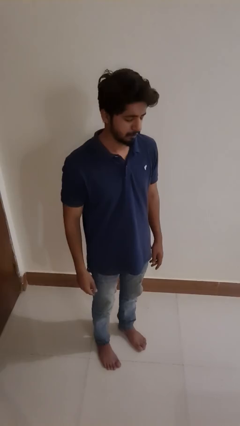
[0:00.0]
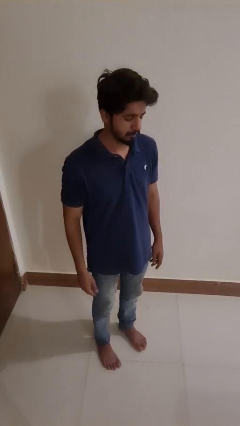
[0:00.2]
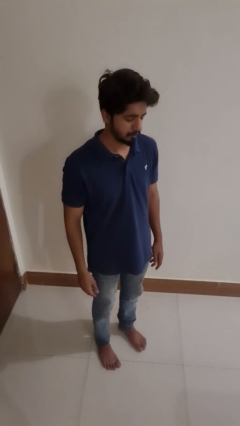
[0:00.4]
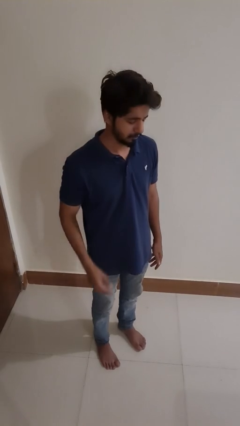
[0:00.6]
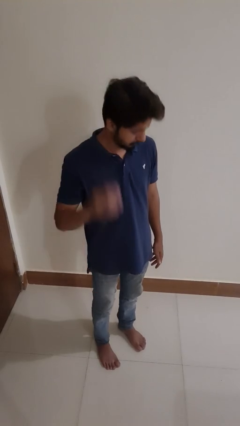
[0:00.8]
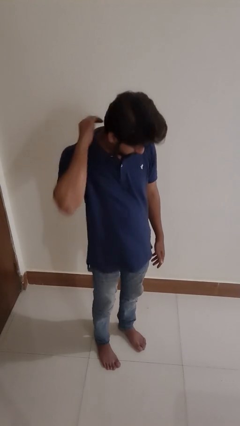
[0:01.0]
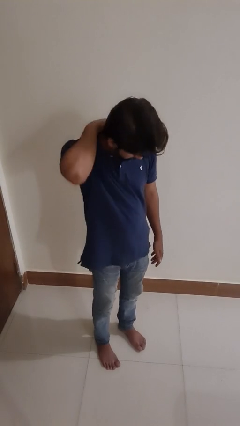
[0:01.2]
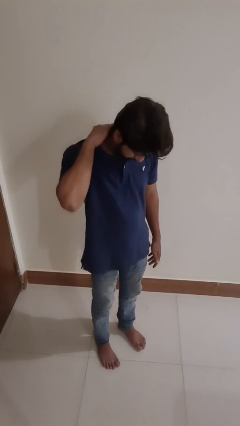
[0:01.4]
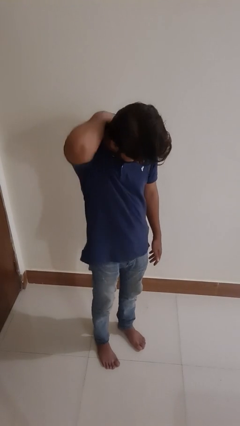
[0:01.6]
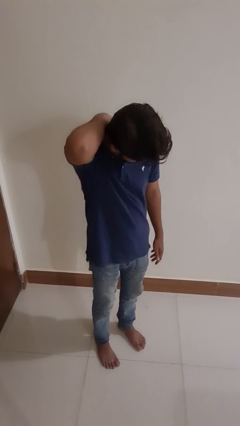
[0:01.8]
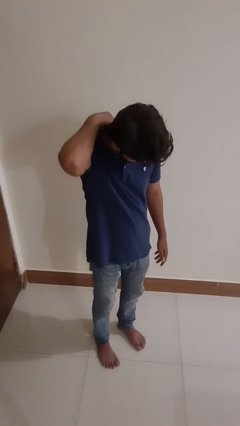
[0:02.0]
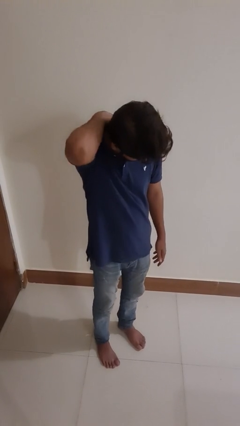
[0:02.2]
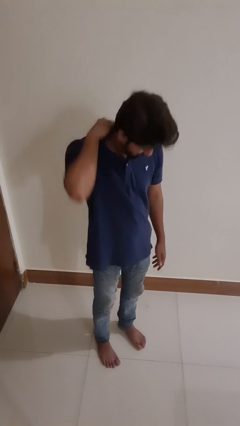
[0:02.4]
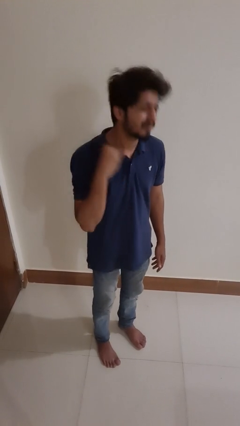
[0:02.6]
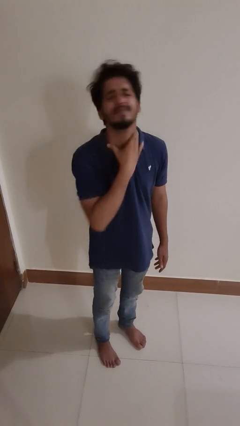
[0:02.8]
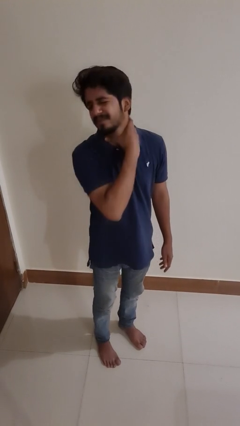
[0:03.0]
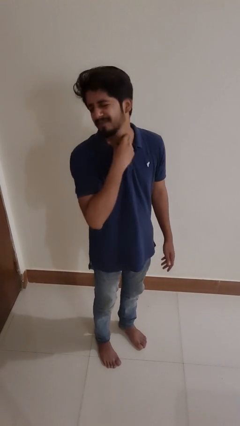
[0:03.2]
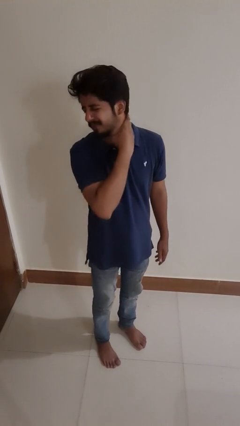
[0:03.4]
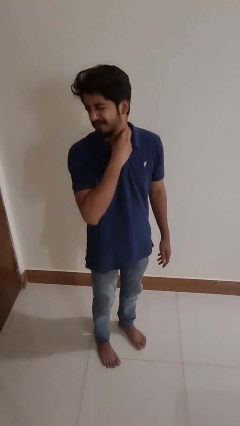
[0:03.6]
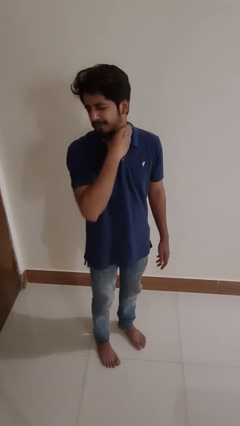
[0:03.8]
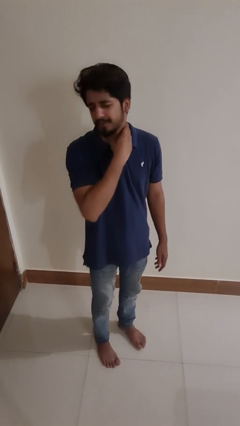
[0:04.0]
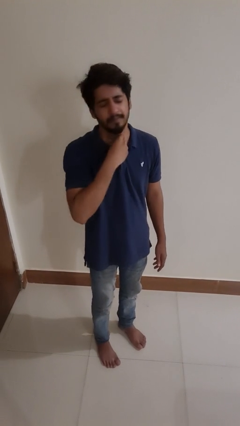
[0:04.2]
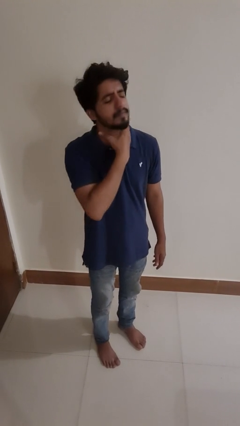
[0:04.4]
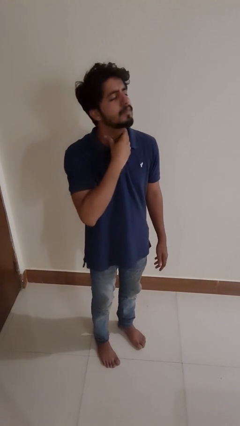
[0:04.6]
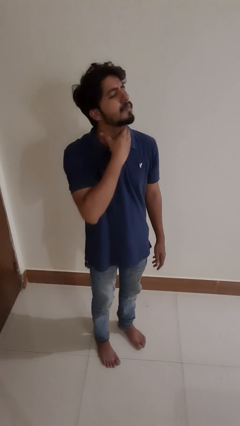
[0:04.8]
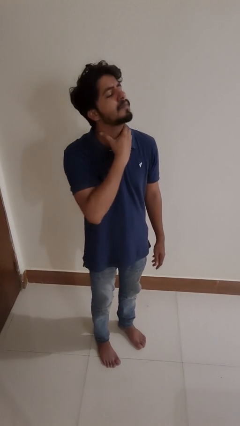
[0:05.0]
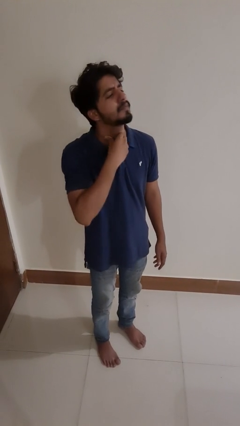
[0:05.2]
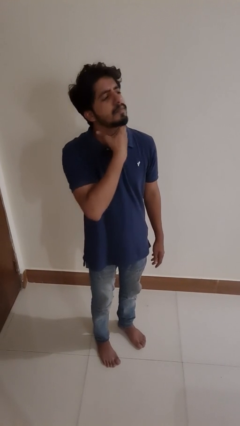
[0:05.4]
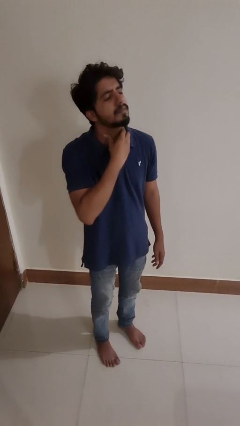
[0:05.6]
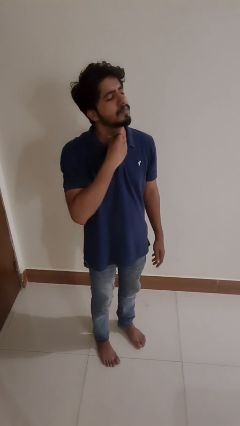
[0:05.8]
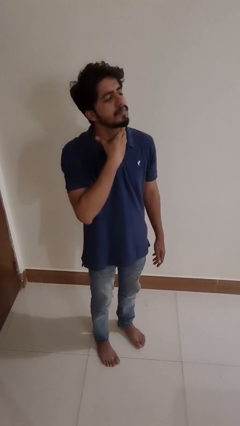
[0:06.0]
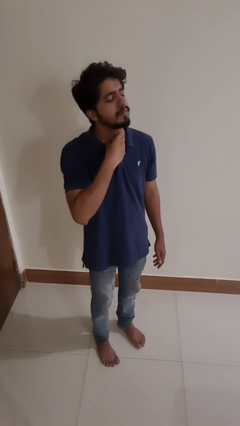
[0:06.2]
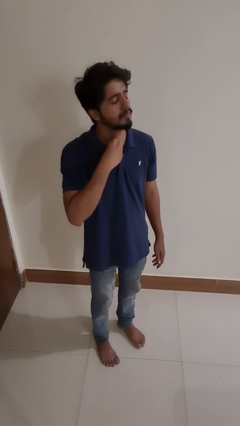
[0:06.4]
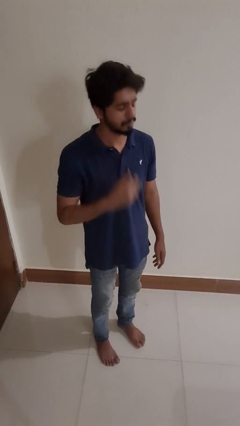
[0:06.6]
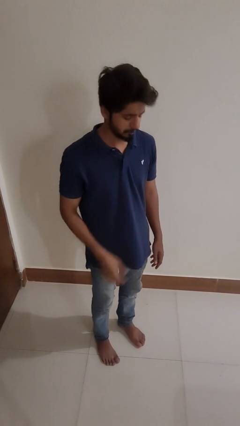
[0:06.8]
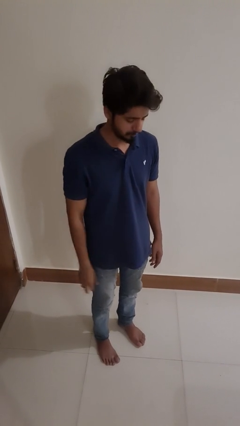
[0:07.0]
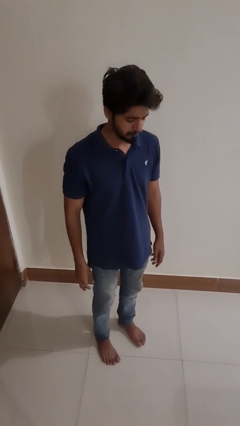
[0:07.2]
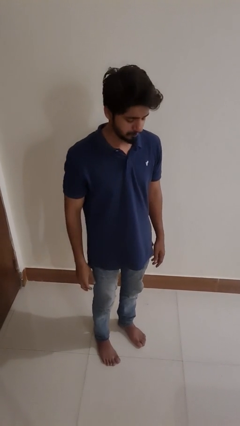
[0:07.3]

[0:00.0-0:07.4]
person rubs neck

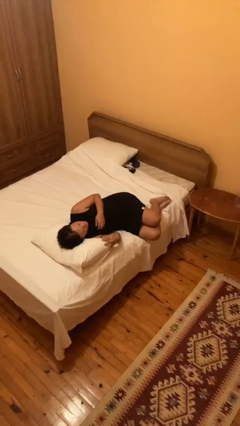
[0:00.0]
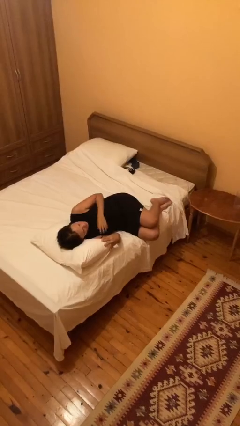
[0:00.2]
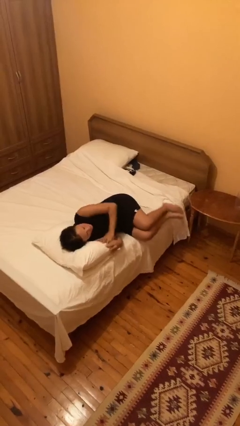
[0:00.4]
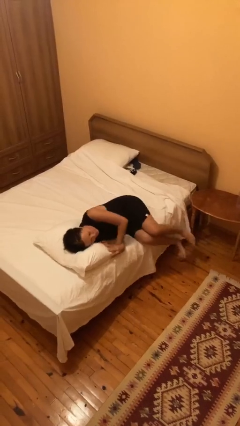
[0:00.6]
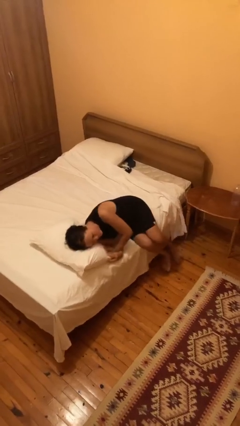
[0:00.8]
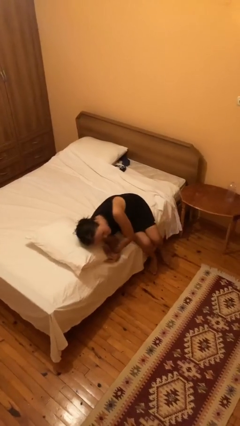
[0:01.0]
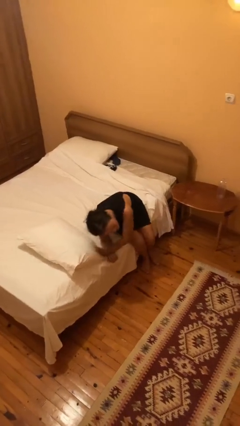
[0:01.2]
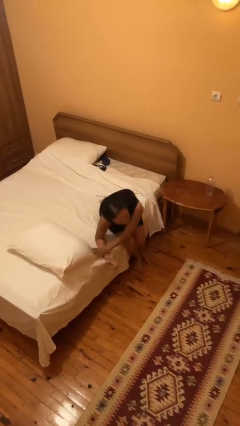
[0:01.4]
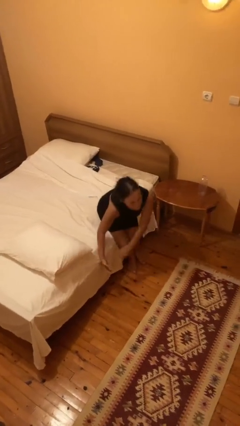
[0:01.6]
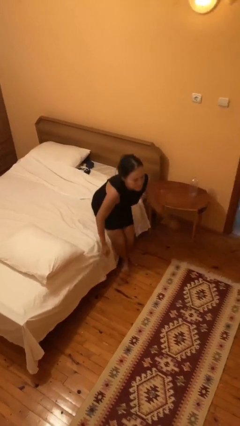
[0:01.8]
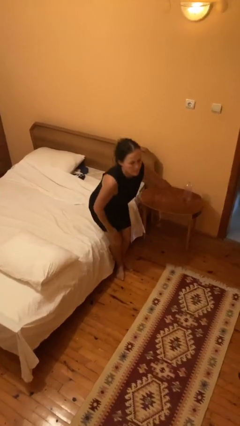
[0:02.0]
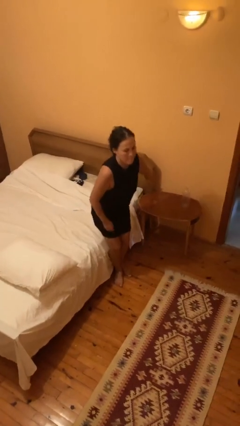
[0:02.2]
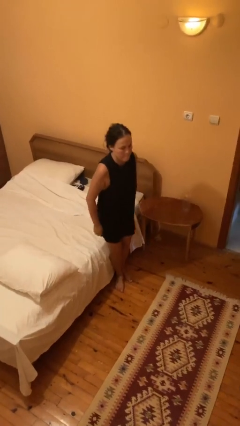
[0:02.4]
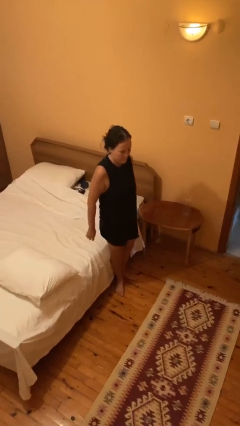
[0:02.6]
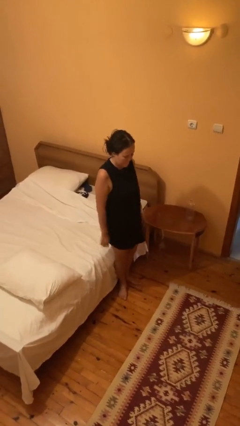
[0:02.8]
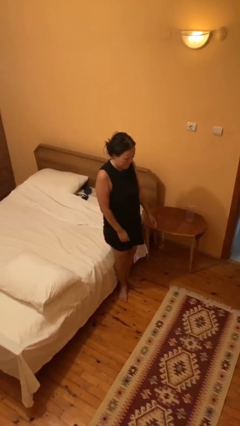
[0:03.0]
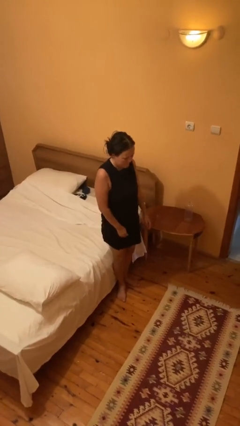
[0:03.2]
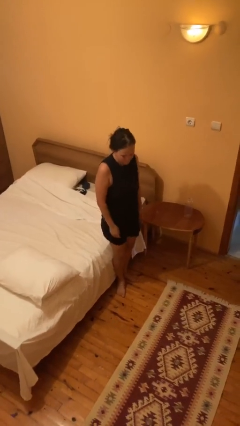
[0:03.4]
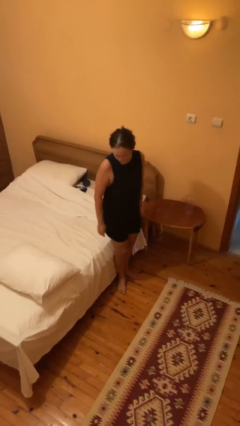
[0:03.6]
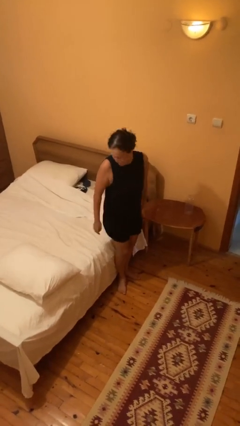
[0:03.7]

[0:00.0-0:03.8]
person stands up

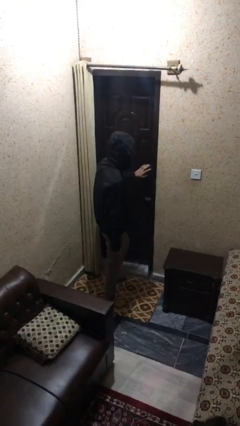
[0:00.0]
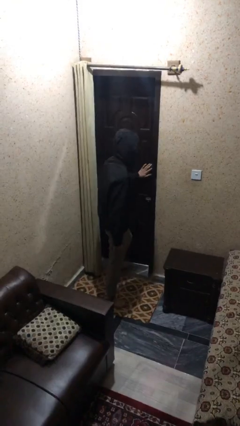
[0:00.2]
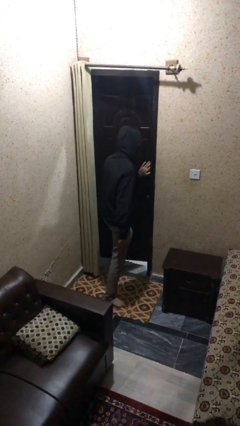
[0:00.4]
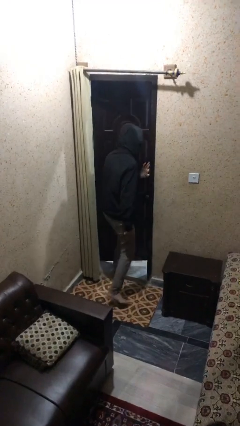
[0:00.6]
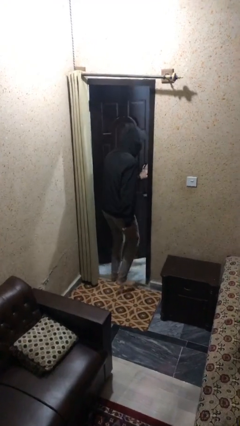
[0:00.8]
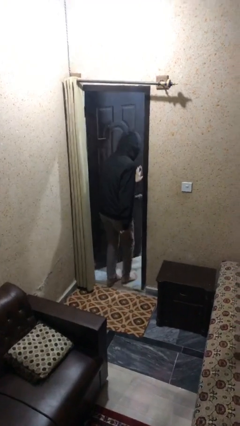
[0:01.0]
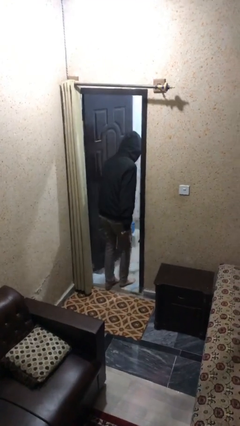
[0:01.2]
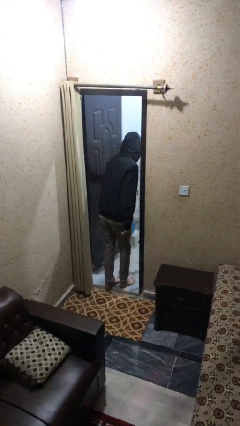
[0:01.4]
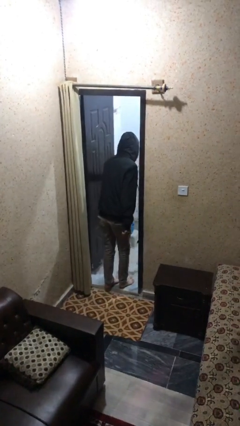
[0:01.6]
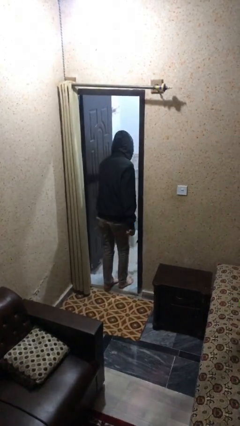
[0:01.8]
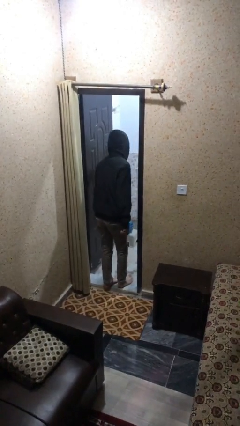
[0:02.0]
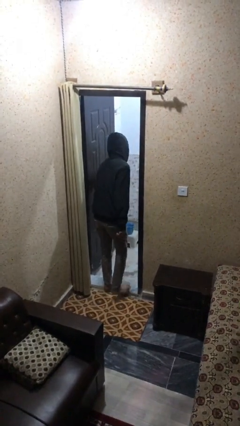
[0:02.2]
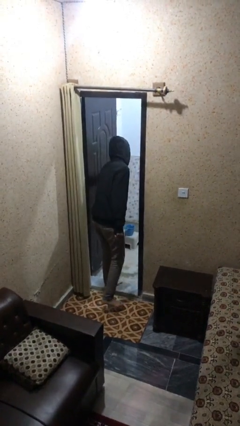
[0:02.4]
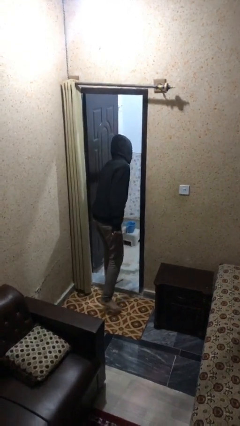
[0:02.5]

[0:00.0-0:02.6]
person opens facility door

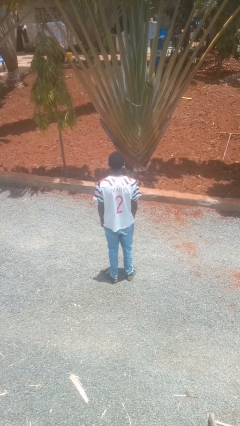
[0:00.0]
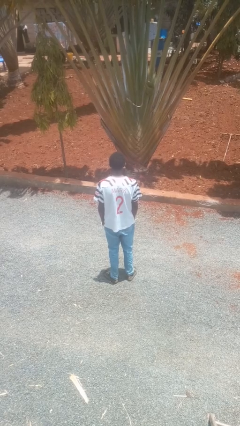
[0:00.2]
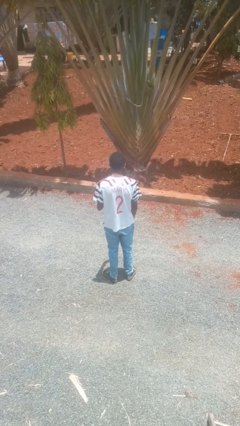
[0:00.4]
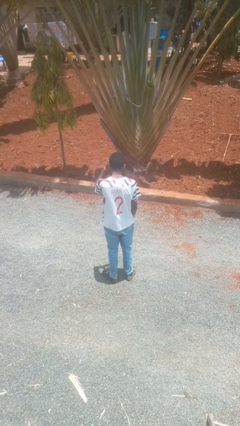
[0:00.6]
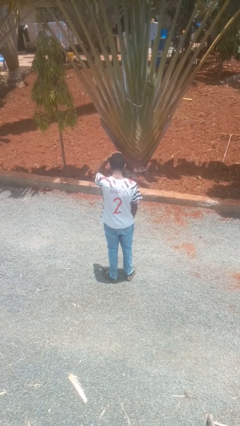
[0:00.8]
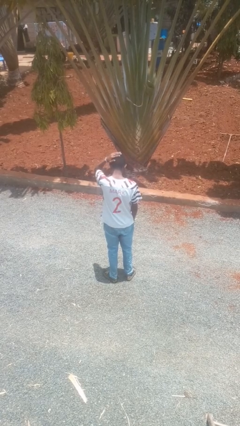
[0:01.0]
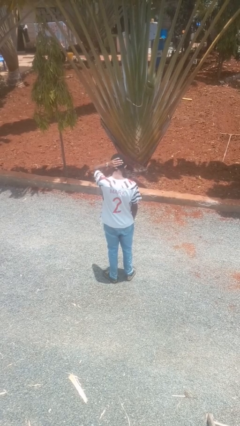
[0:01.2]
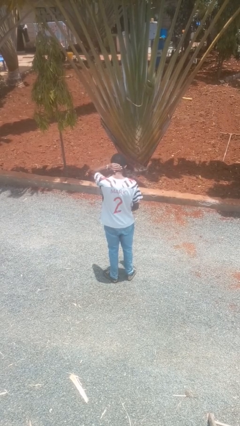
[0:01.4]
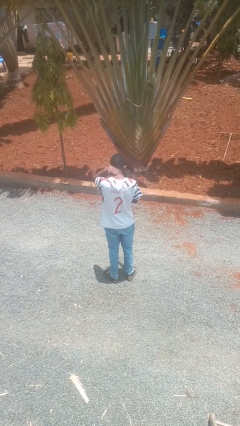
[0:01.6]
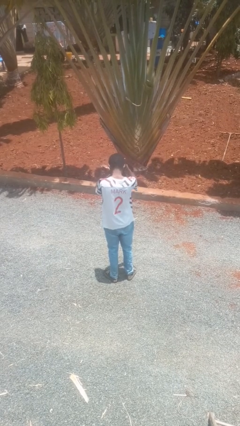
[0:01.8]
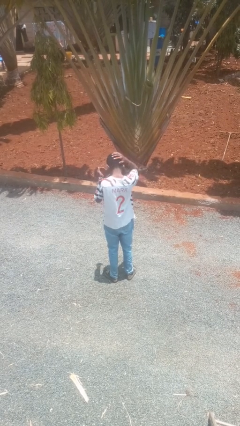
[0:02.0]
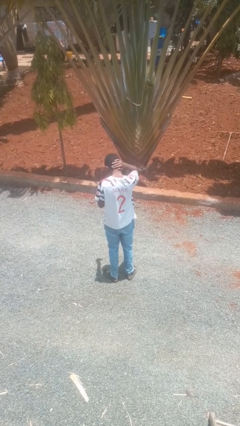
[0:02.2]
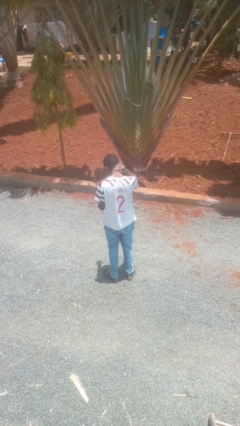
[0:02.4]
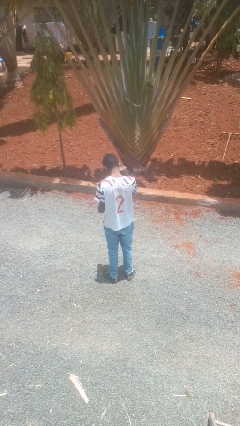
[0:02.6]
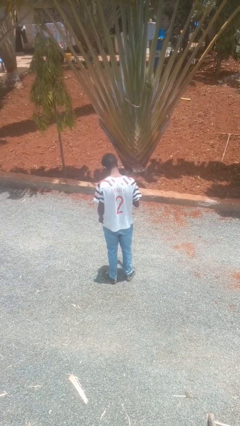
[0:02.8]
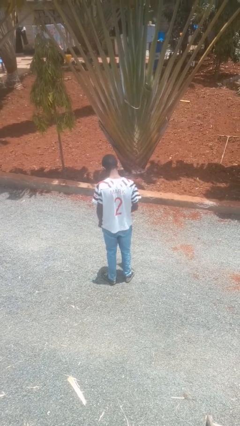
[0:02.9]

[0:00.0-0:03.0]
person strokes hair

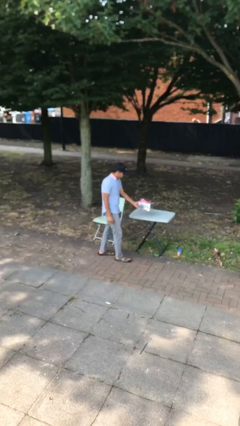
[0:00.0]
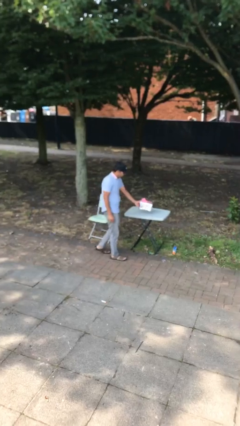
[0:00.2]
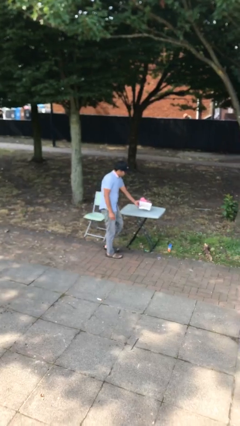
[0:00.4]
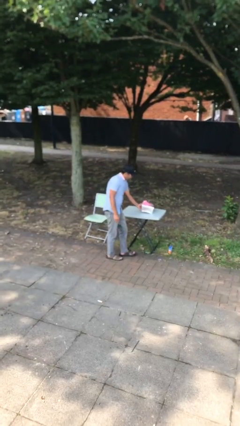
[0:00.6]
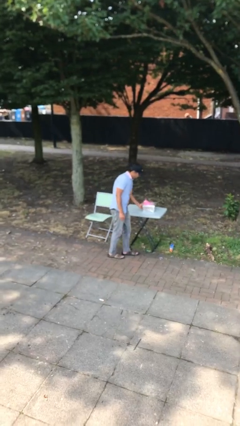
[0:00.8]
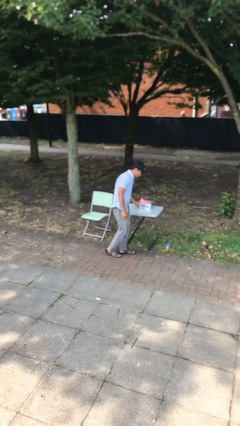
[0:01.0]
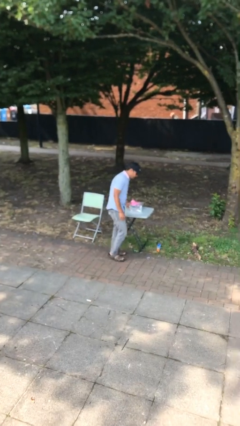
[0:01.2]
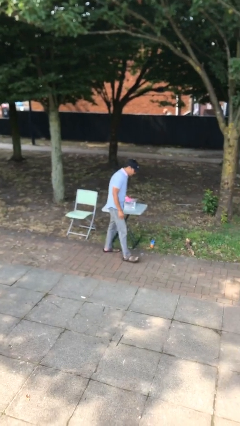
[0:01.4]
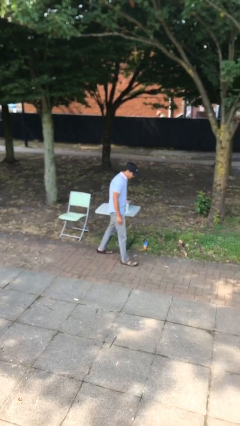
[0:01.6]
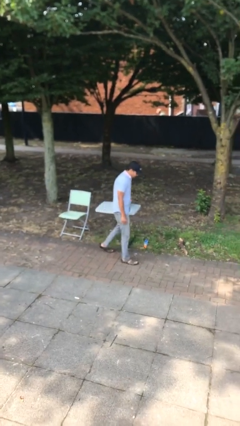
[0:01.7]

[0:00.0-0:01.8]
person puts down object on table
